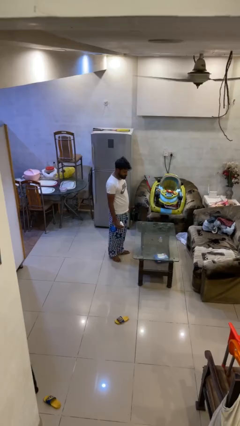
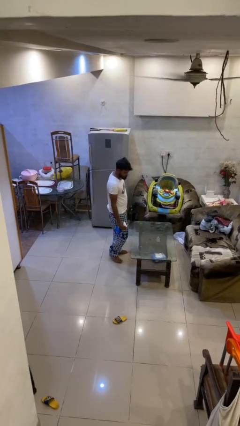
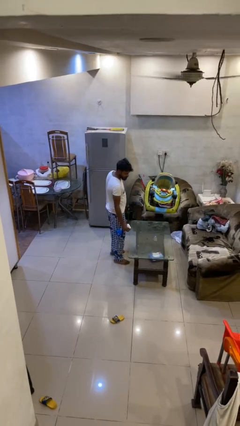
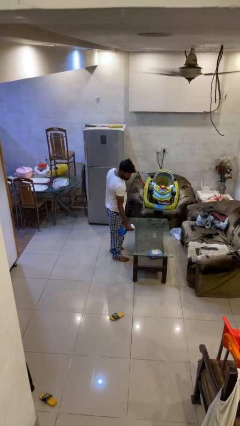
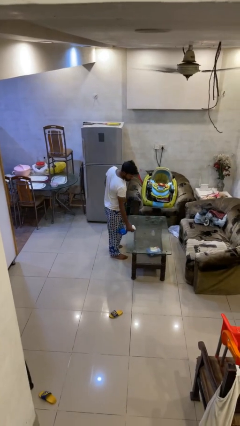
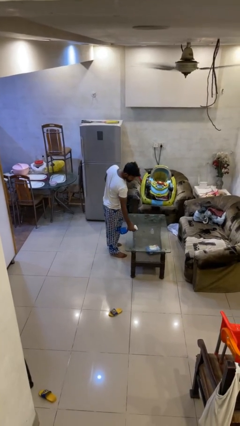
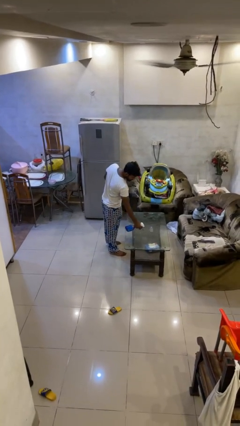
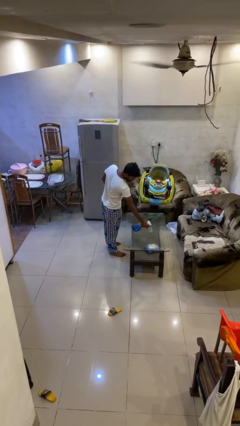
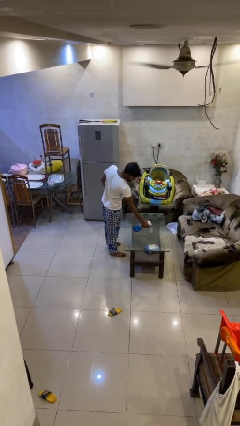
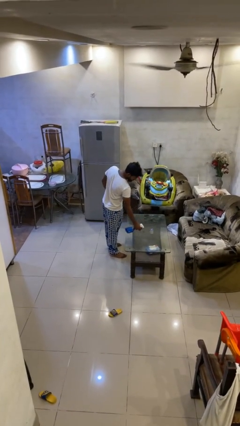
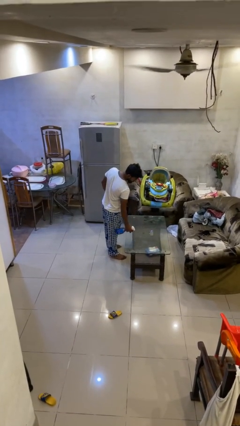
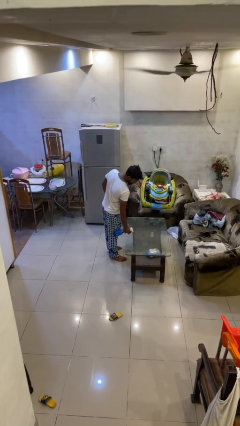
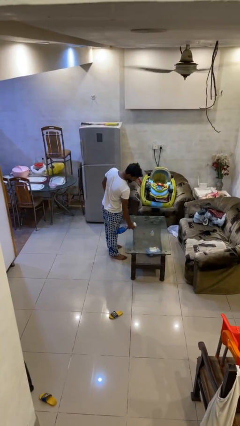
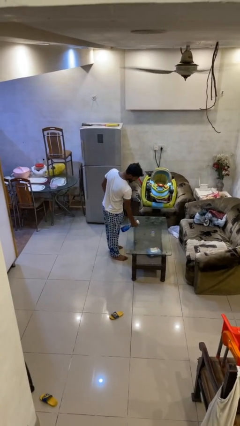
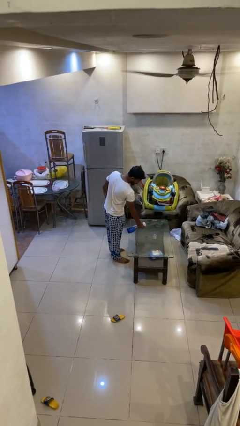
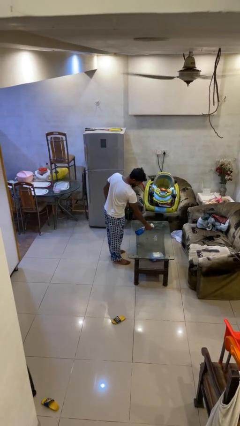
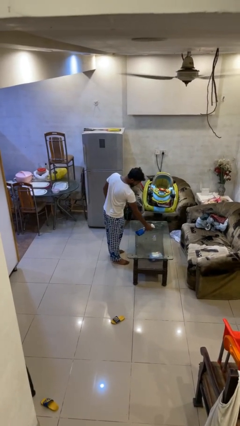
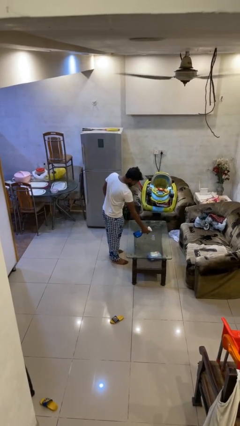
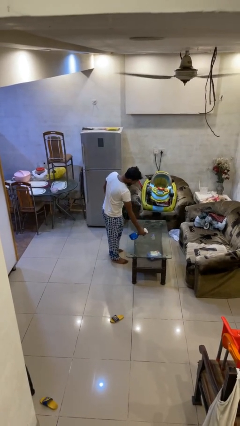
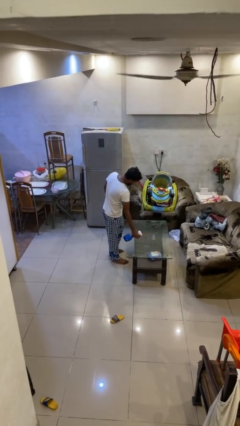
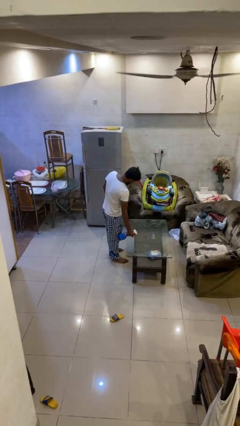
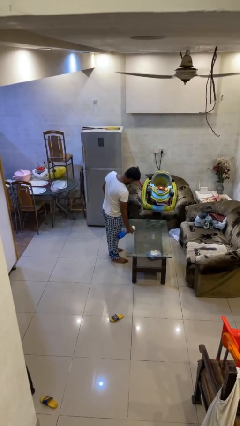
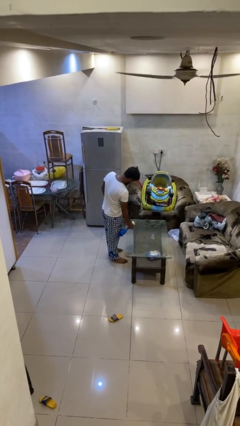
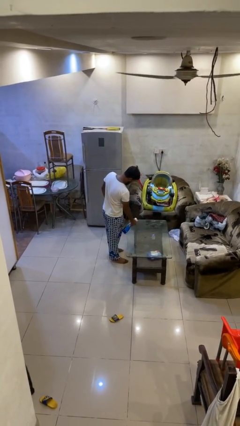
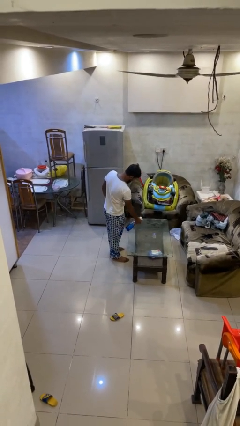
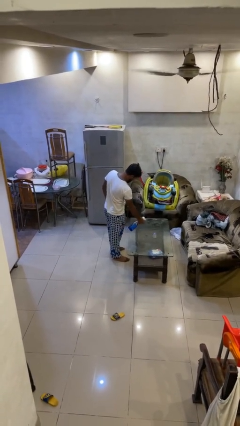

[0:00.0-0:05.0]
person sprays from bottle

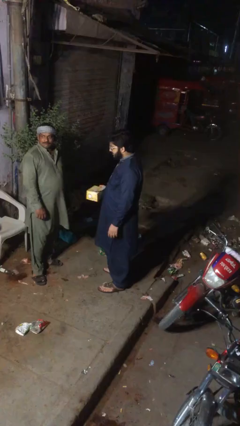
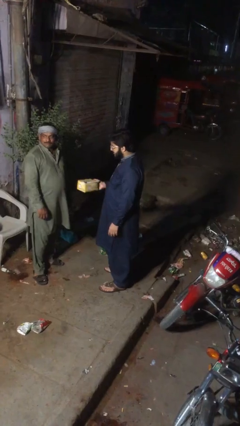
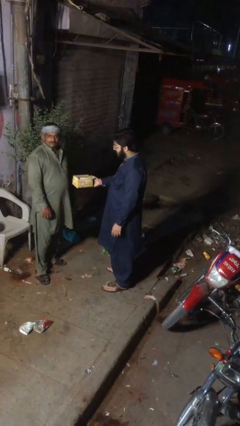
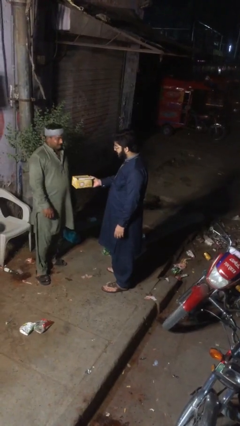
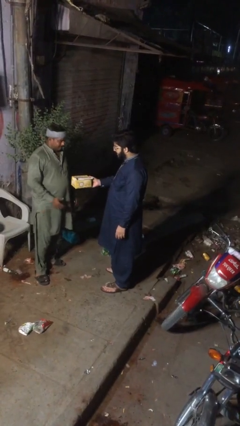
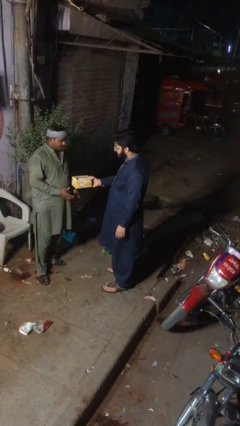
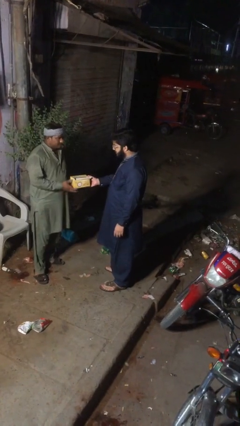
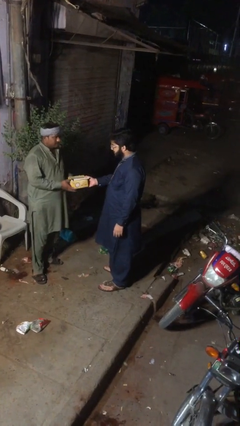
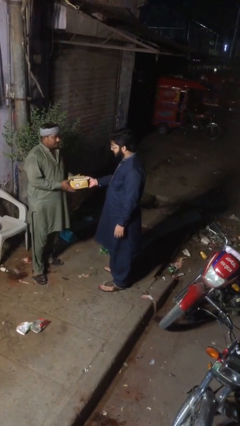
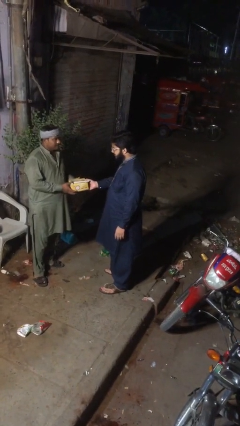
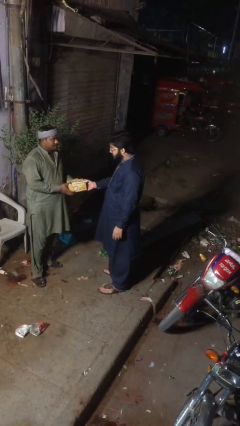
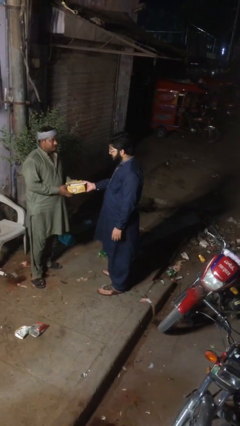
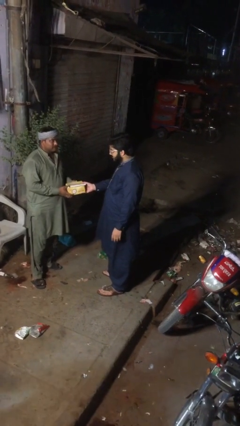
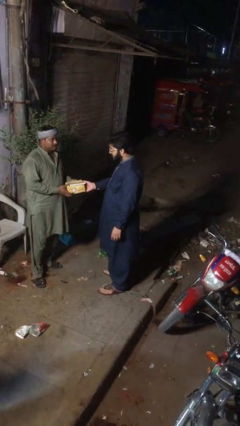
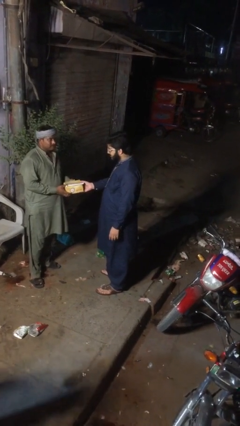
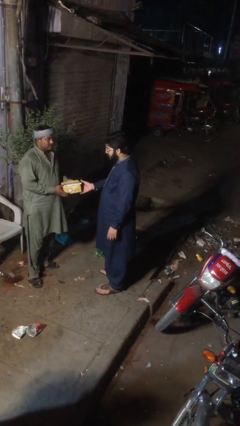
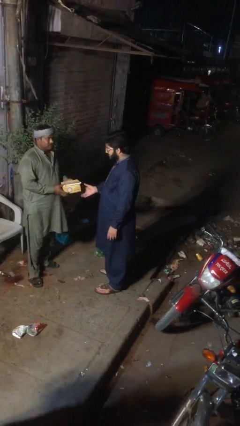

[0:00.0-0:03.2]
person transfers object to person

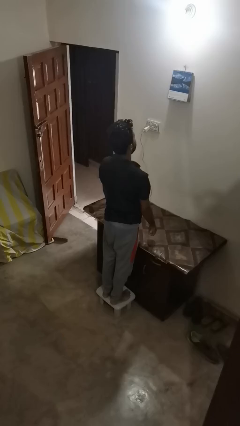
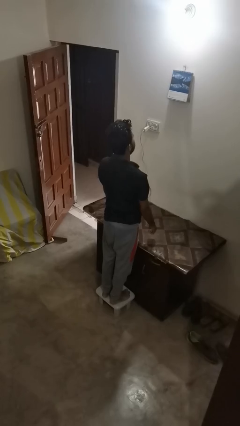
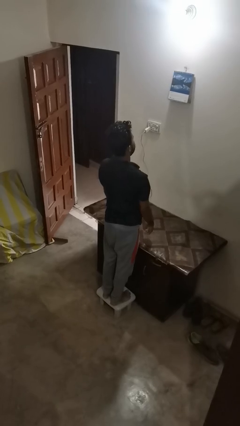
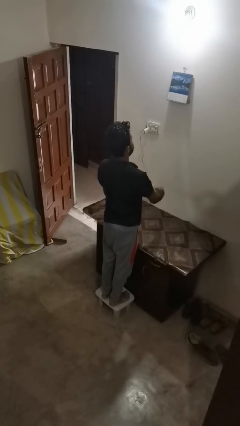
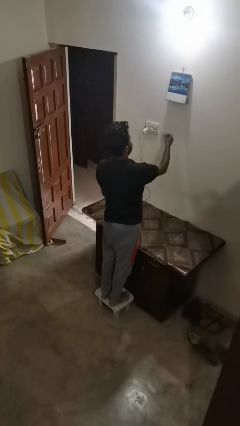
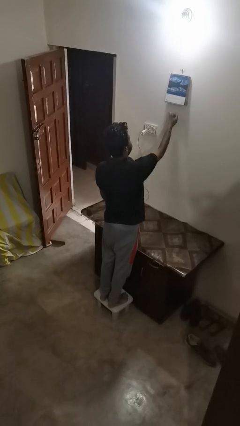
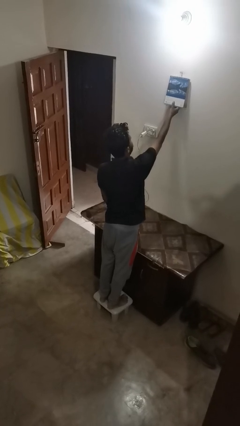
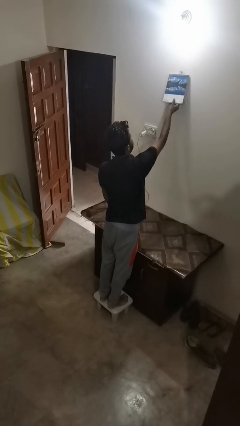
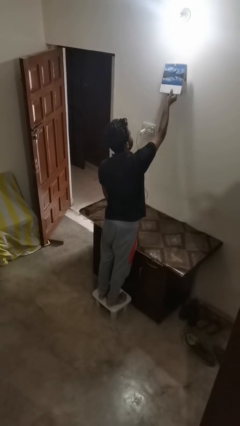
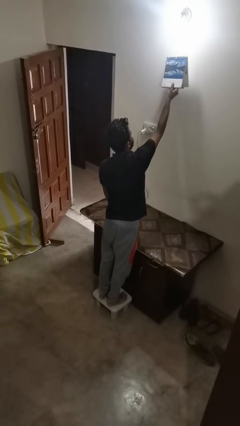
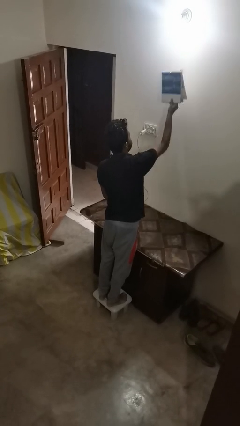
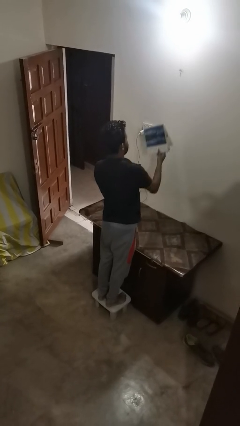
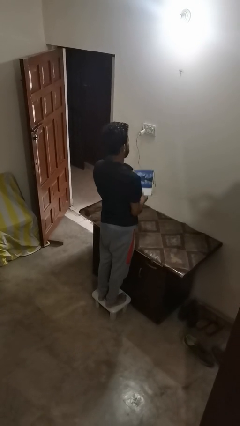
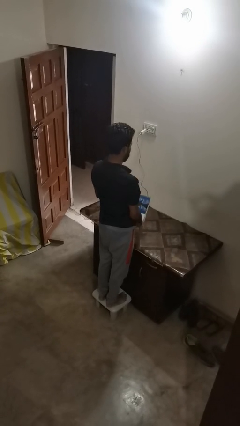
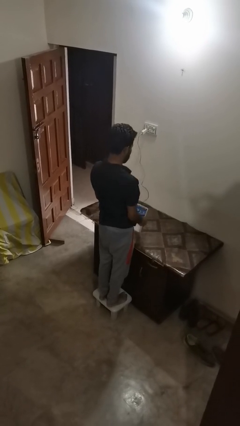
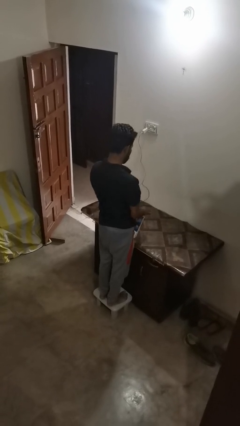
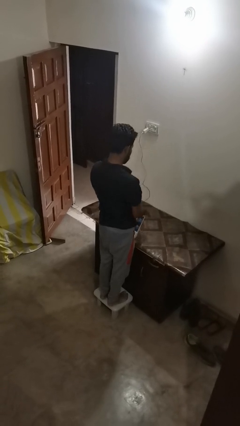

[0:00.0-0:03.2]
person takes down picture frame

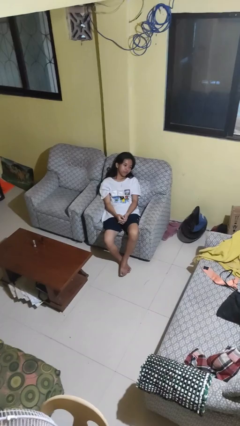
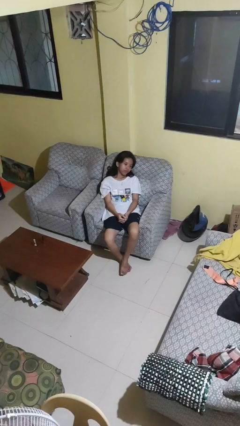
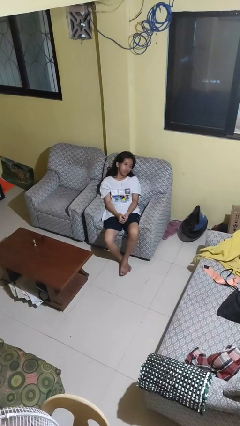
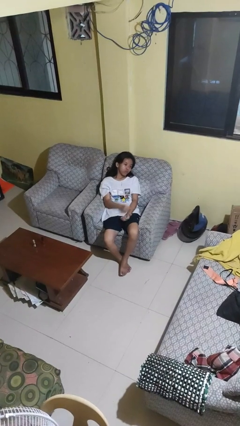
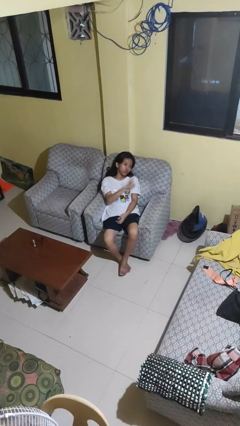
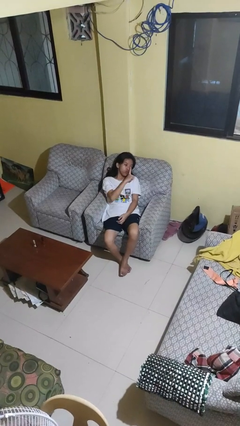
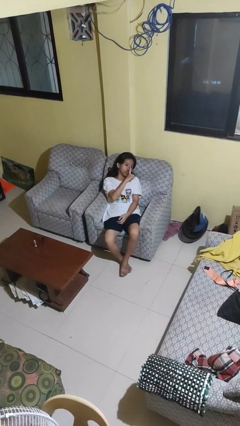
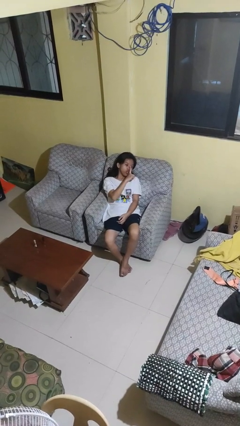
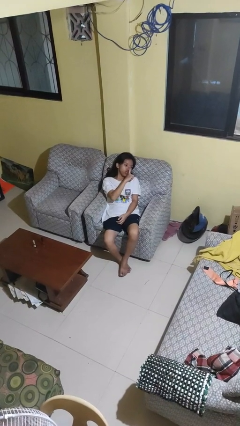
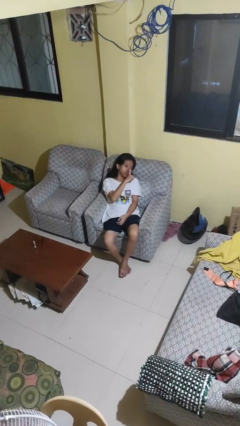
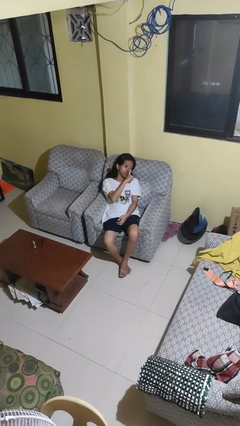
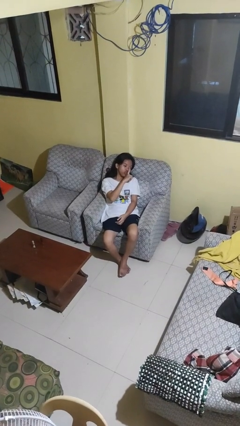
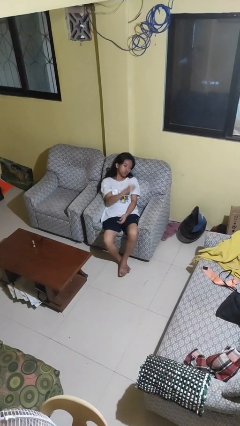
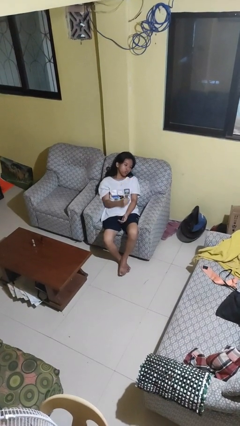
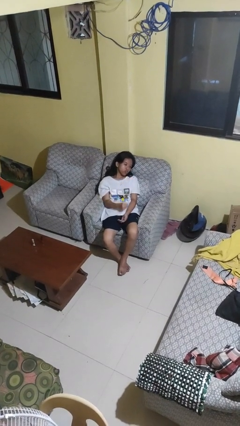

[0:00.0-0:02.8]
person gestures be quiet

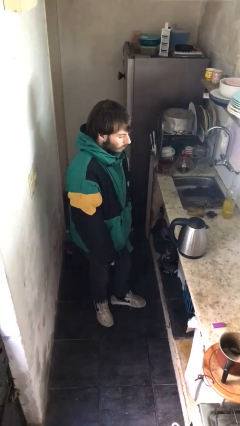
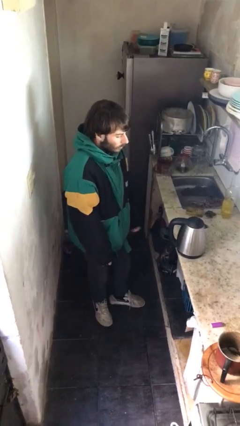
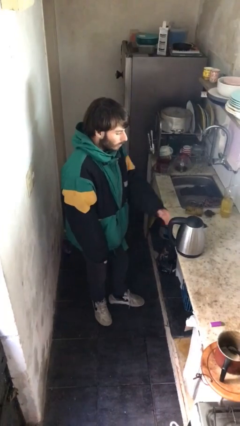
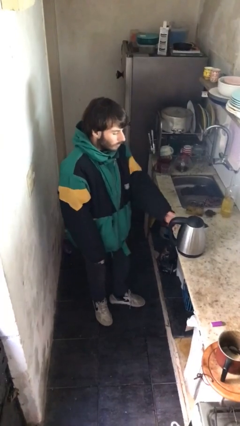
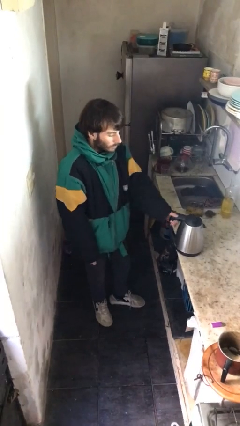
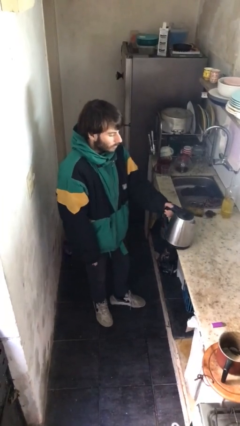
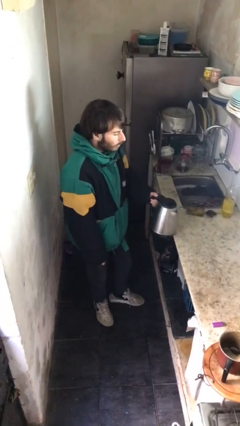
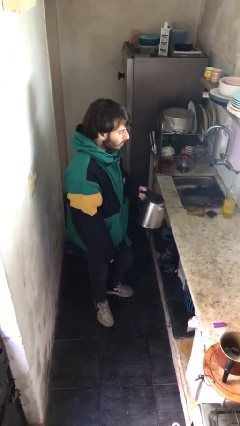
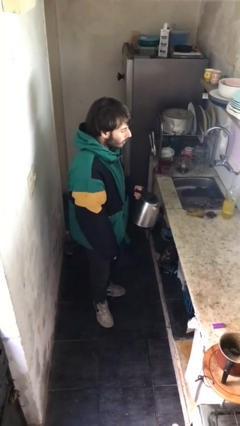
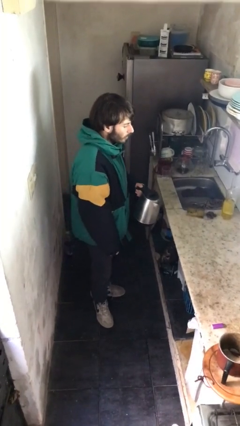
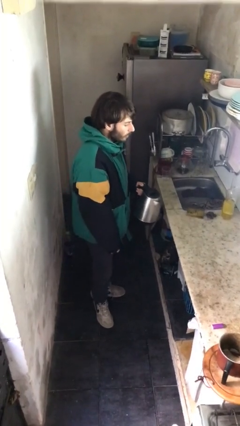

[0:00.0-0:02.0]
person picks up object from countertop

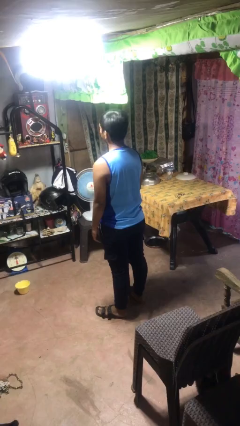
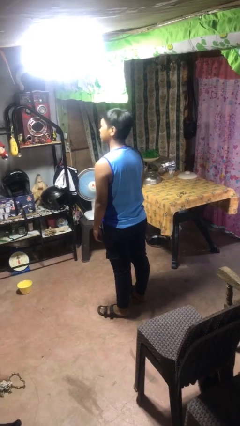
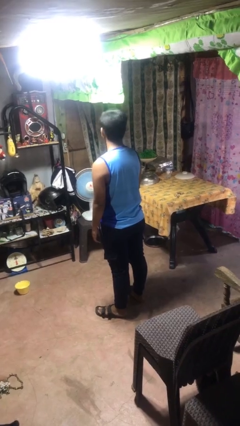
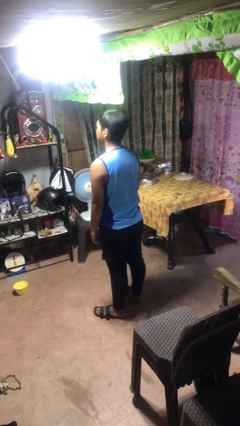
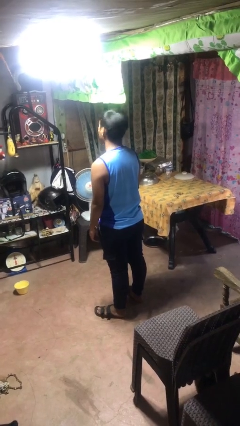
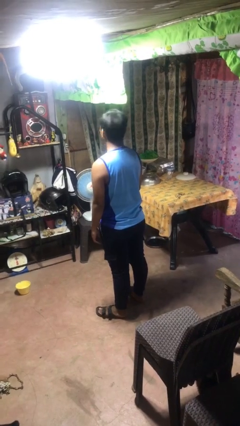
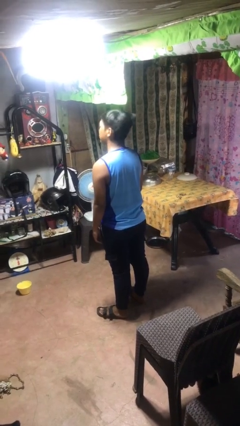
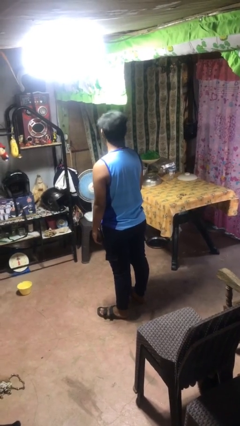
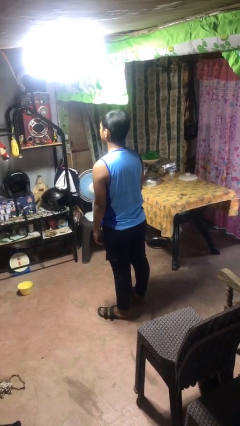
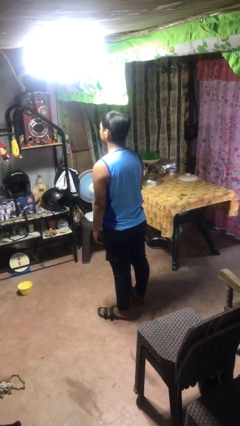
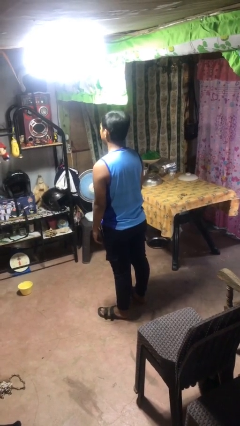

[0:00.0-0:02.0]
person shakes head
